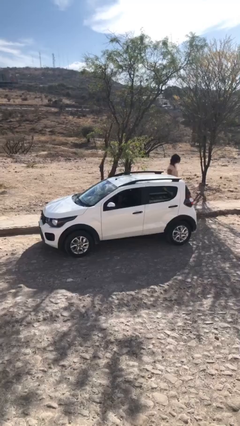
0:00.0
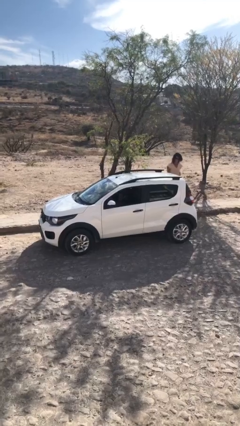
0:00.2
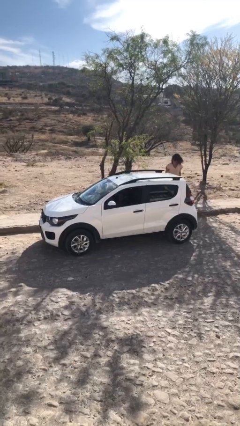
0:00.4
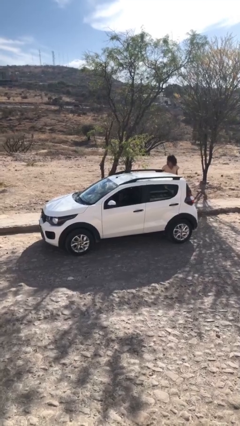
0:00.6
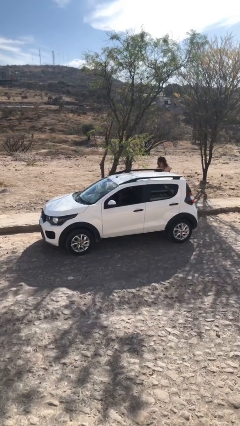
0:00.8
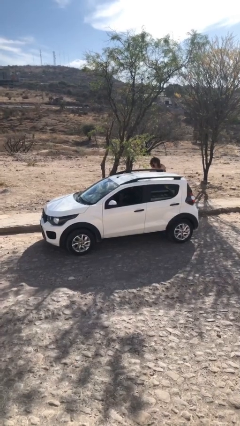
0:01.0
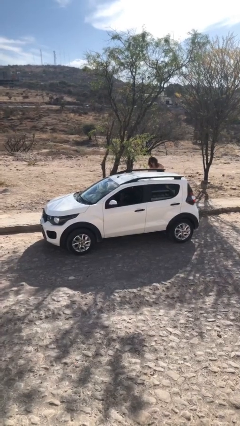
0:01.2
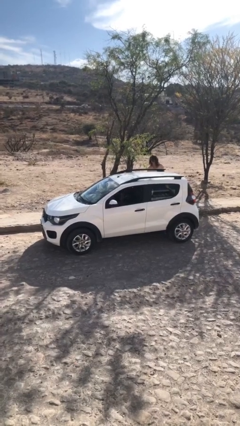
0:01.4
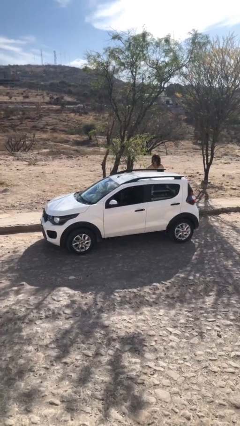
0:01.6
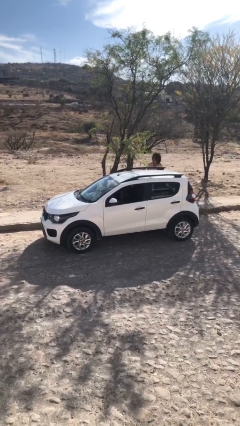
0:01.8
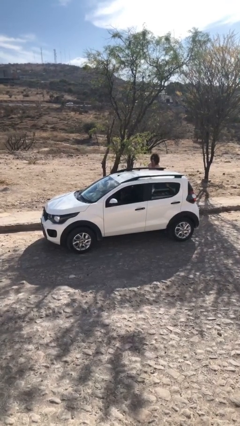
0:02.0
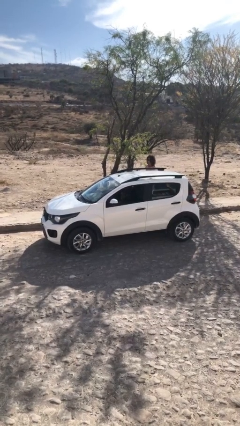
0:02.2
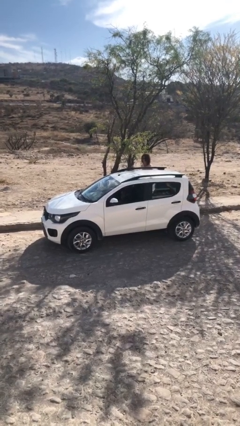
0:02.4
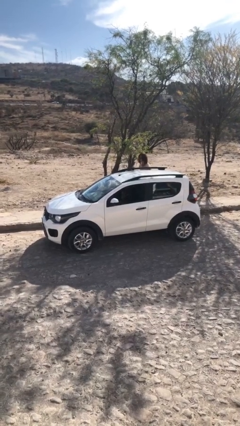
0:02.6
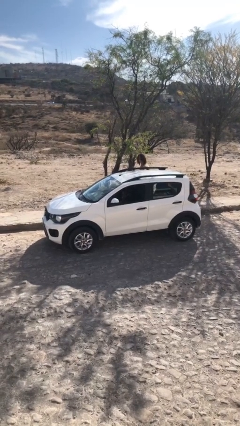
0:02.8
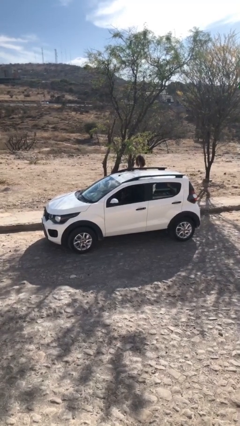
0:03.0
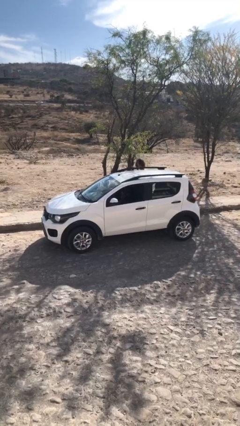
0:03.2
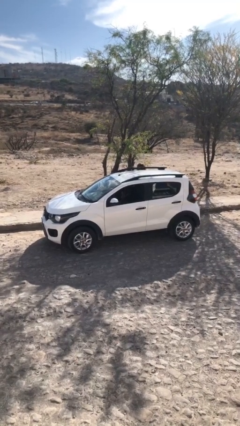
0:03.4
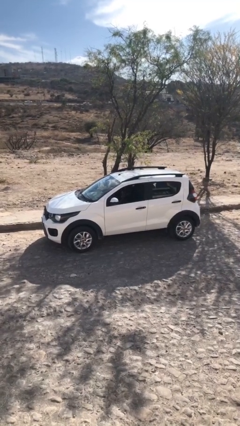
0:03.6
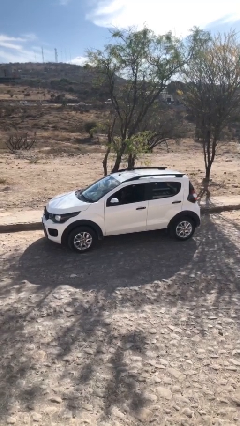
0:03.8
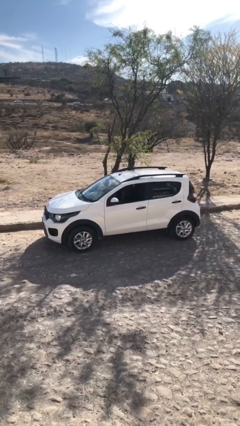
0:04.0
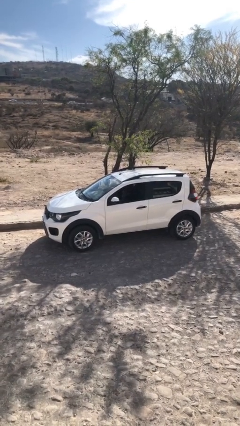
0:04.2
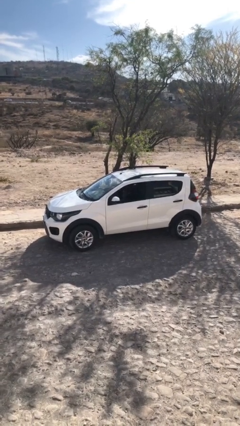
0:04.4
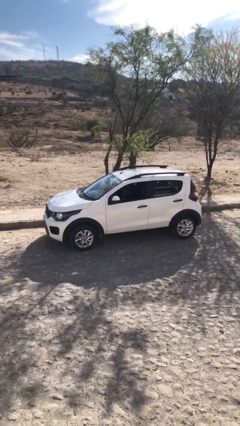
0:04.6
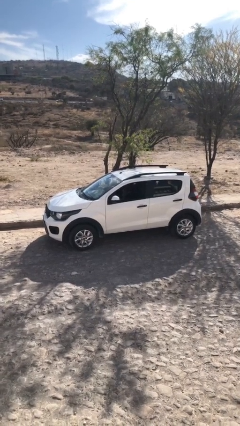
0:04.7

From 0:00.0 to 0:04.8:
car picks up person

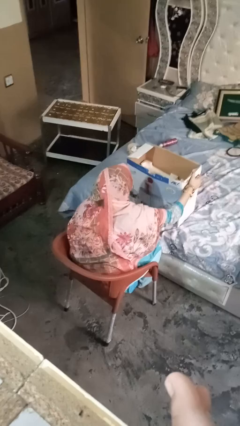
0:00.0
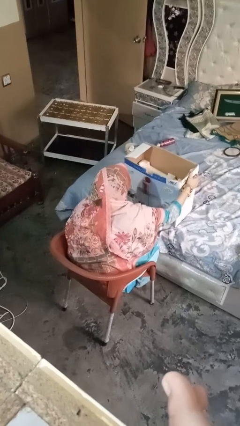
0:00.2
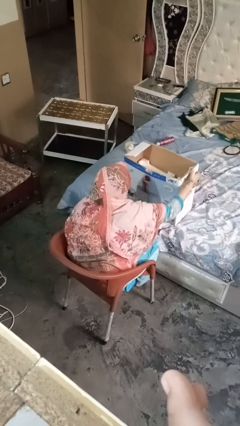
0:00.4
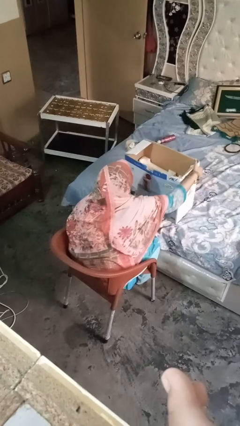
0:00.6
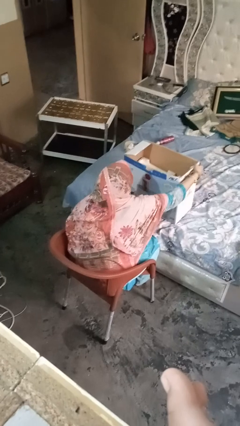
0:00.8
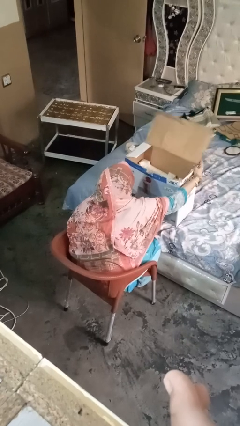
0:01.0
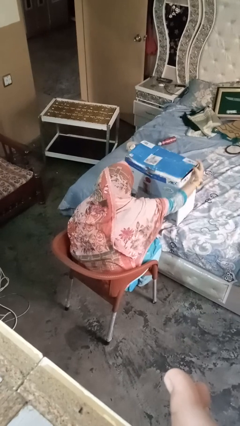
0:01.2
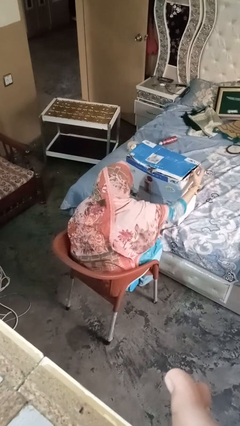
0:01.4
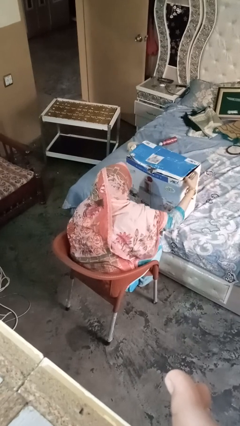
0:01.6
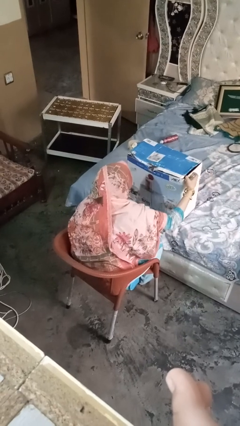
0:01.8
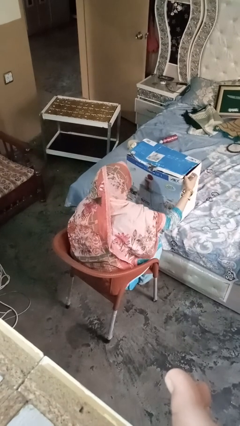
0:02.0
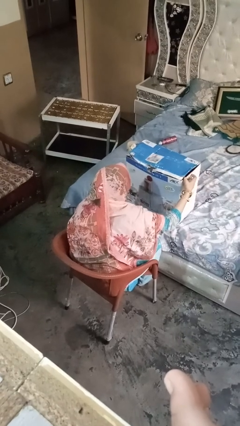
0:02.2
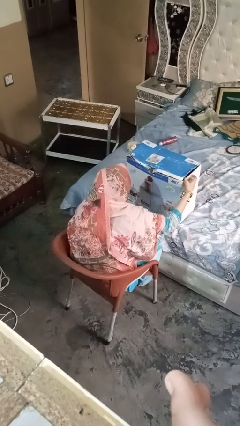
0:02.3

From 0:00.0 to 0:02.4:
person closes box

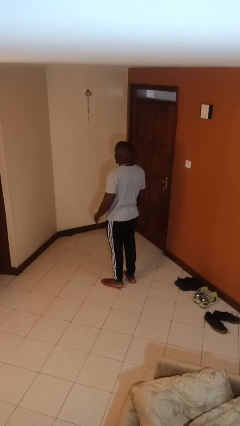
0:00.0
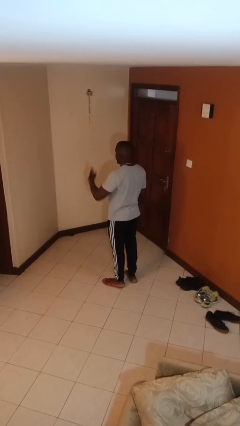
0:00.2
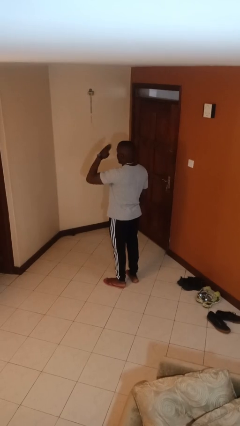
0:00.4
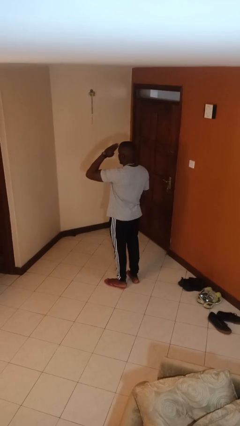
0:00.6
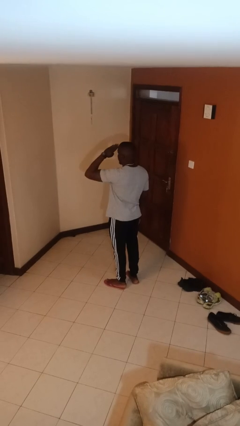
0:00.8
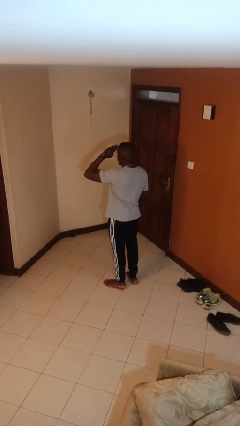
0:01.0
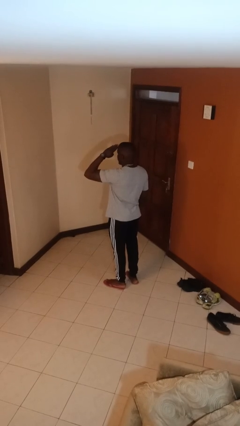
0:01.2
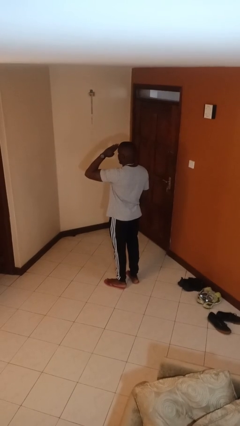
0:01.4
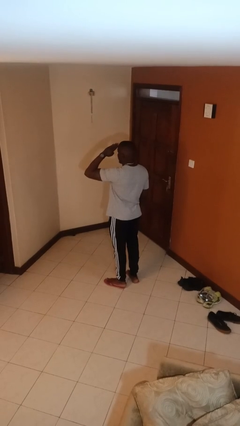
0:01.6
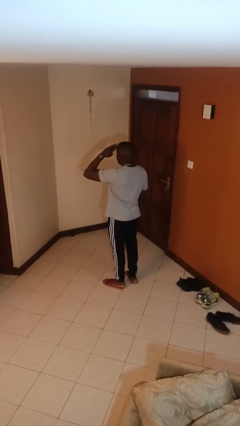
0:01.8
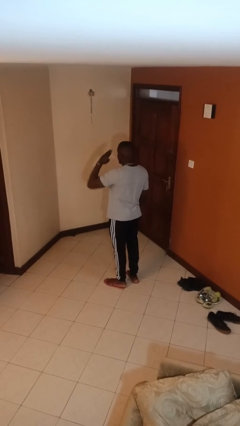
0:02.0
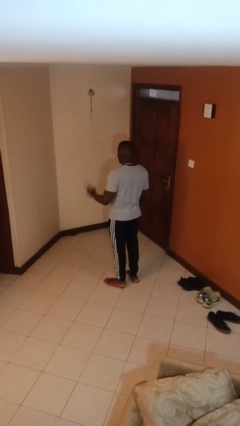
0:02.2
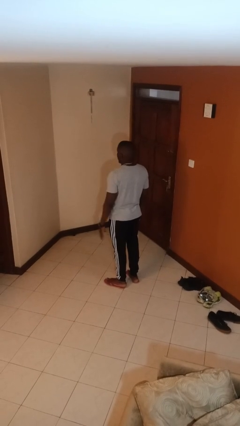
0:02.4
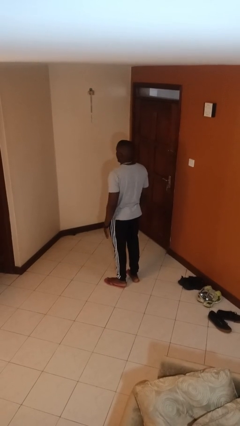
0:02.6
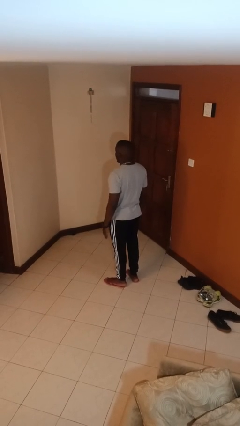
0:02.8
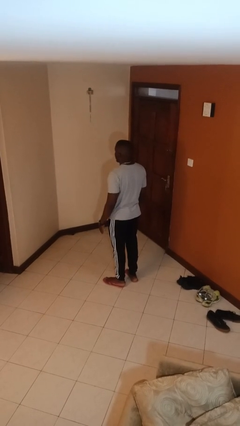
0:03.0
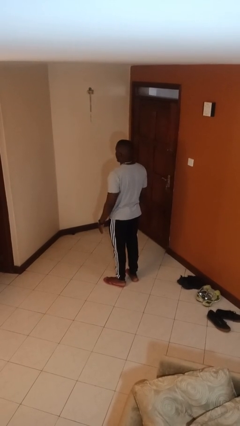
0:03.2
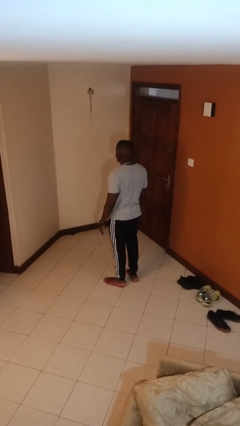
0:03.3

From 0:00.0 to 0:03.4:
person salutes

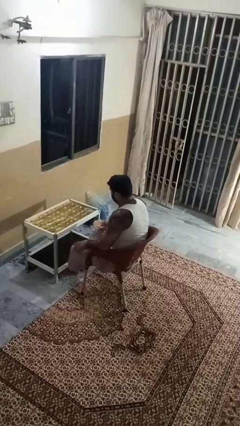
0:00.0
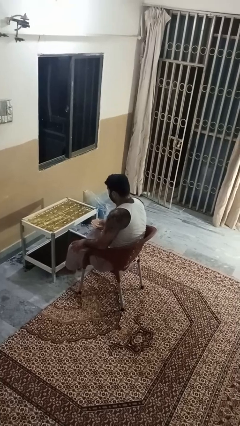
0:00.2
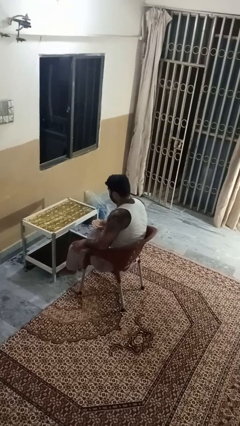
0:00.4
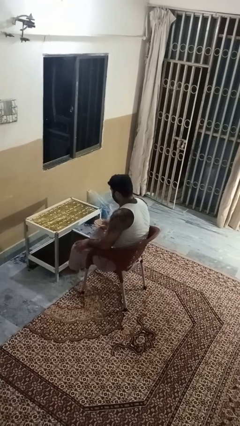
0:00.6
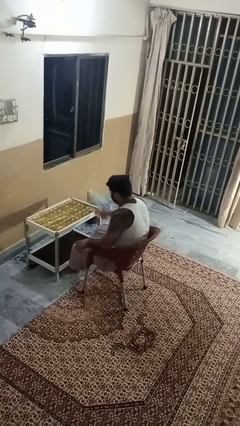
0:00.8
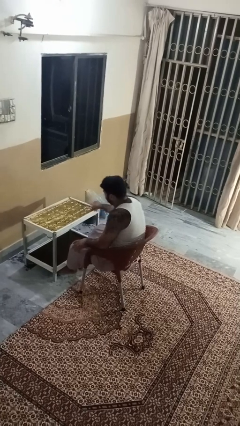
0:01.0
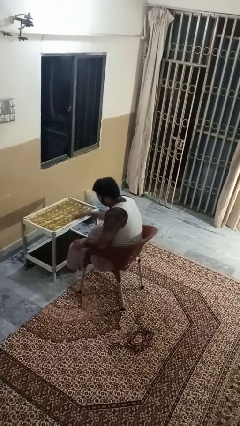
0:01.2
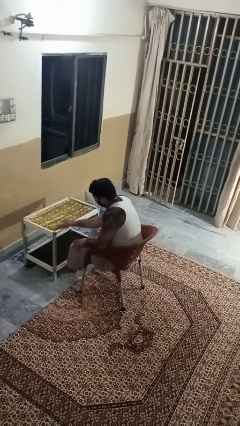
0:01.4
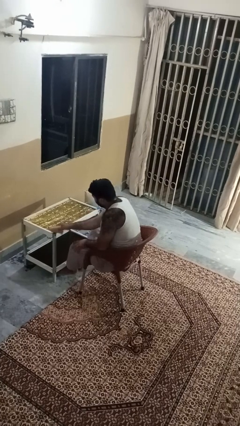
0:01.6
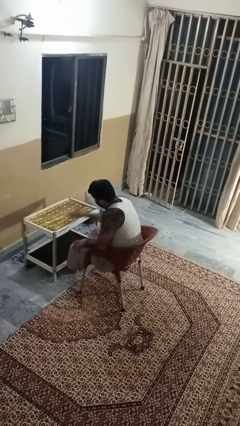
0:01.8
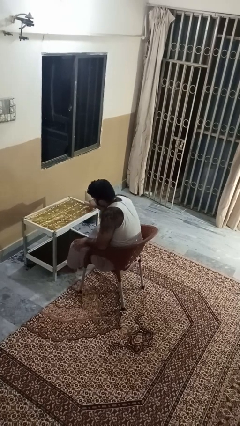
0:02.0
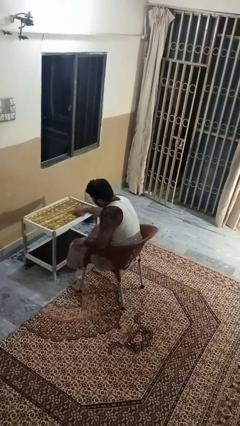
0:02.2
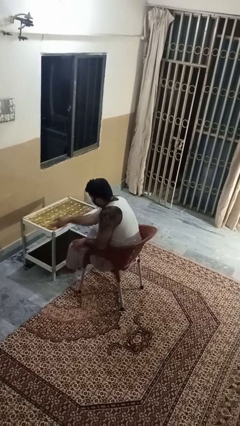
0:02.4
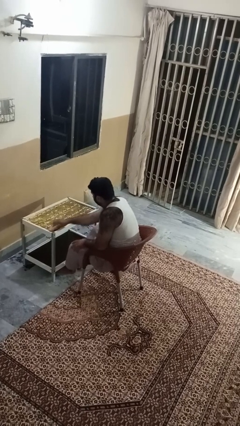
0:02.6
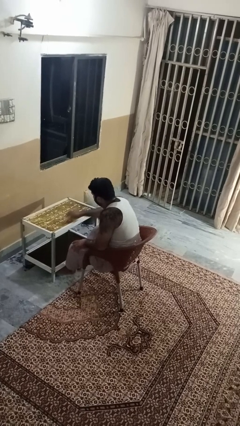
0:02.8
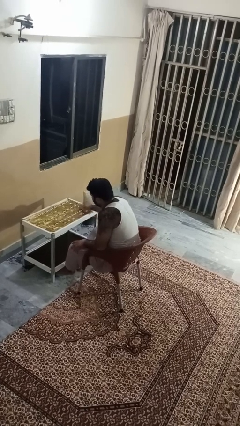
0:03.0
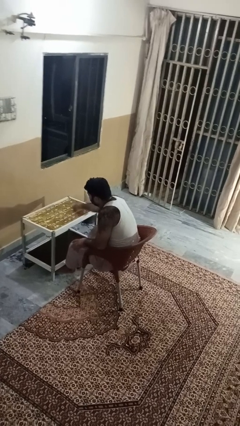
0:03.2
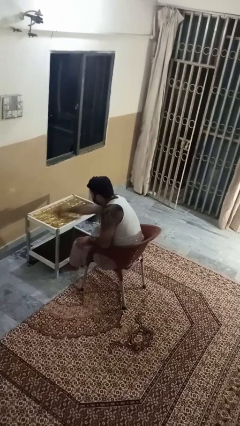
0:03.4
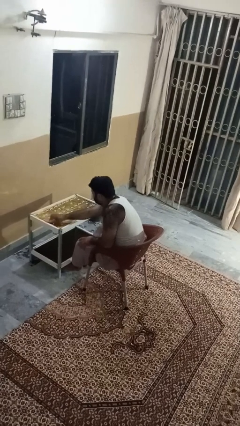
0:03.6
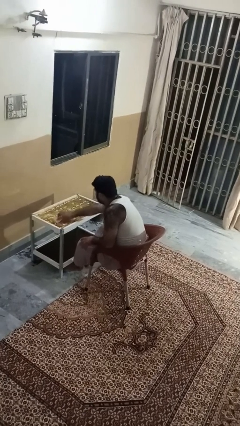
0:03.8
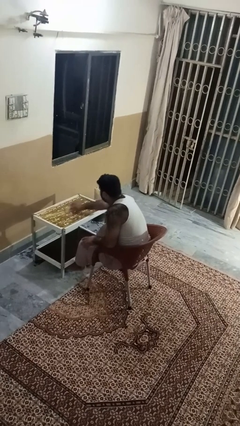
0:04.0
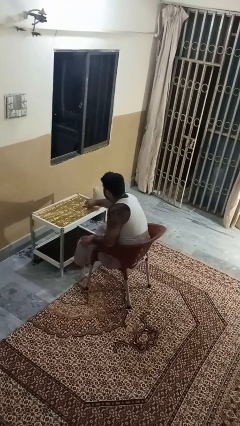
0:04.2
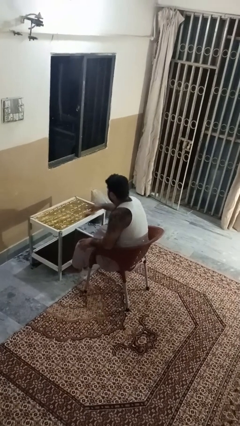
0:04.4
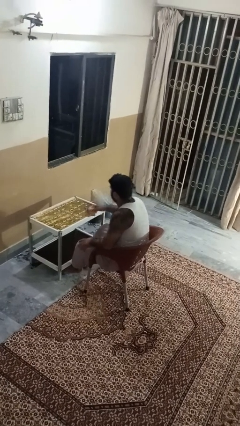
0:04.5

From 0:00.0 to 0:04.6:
person cleans table with rag

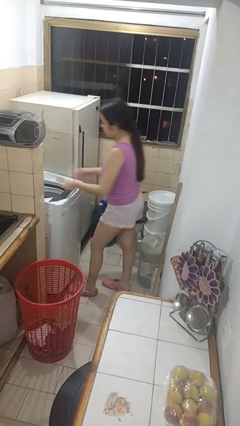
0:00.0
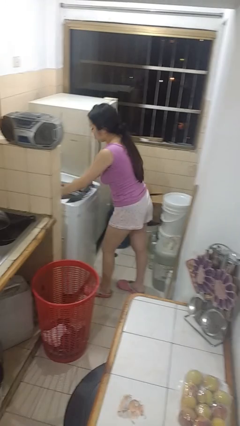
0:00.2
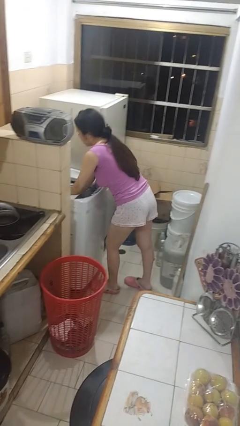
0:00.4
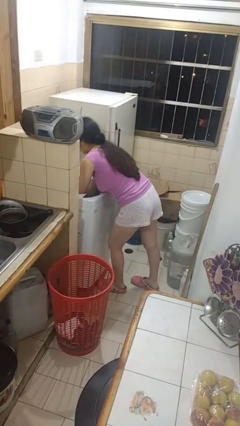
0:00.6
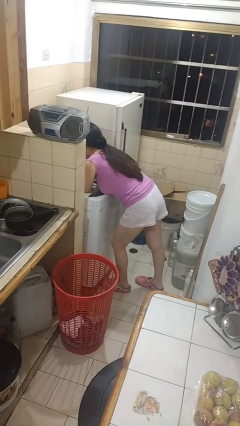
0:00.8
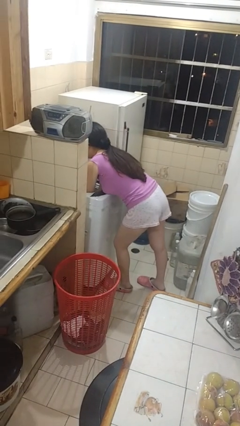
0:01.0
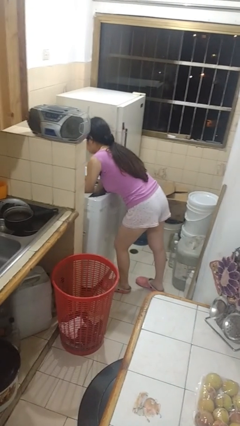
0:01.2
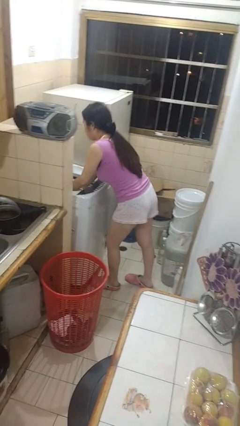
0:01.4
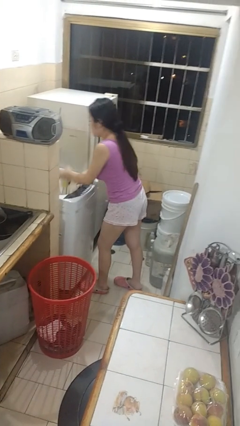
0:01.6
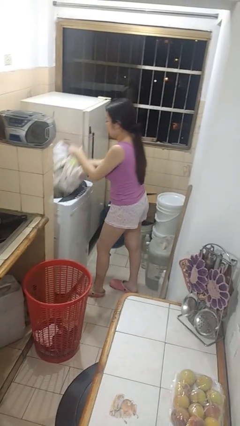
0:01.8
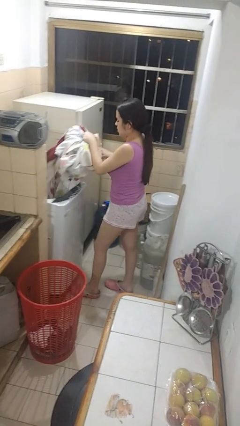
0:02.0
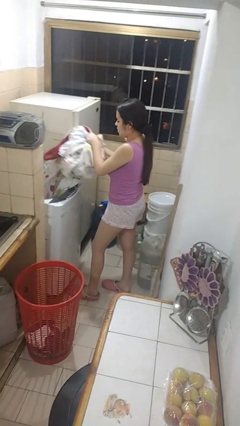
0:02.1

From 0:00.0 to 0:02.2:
person unloads clotheswasher
